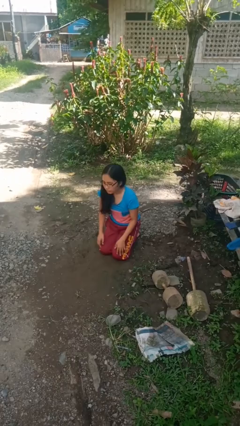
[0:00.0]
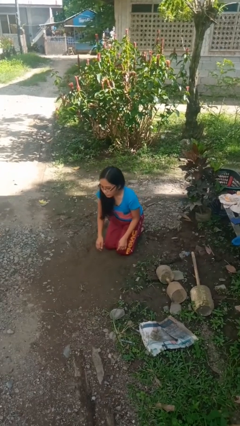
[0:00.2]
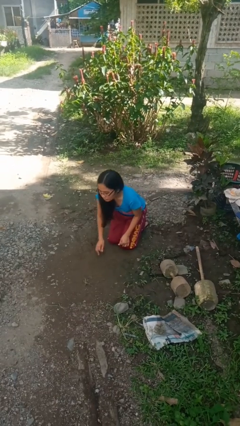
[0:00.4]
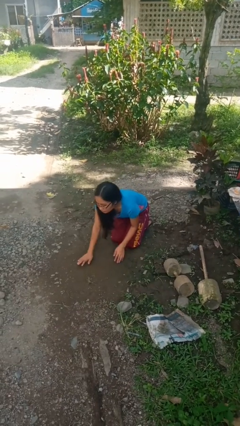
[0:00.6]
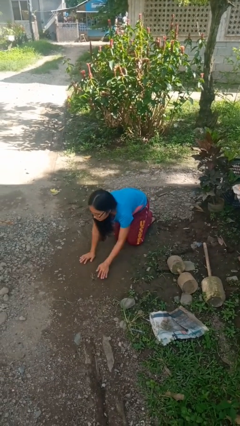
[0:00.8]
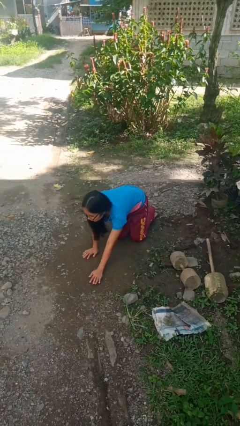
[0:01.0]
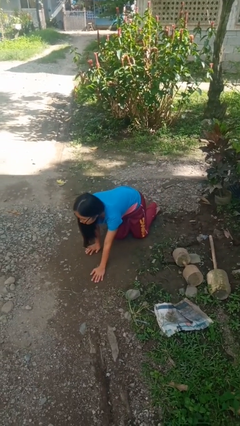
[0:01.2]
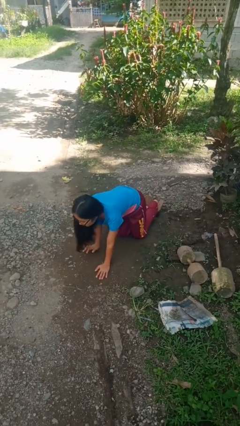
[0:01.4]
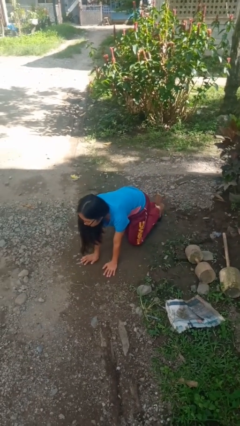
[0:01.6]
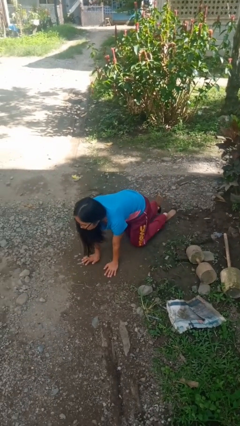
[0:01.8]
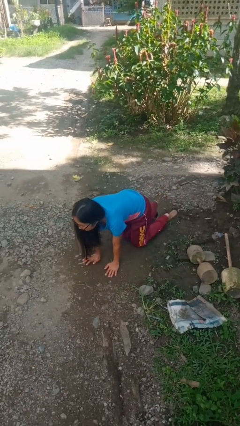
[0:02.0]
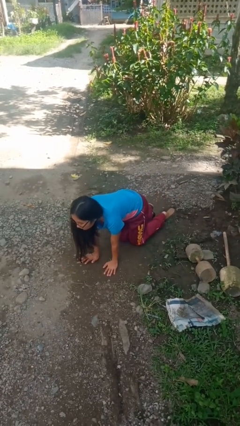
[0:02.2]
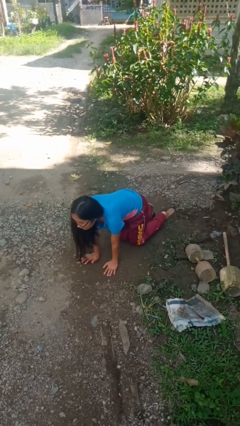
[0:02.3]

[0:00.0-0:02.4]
person crawls

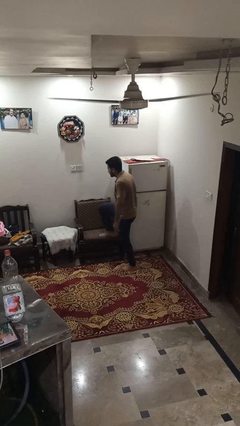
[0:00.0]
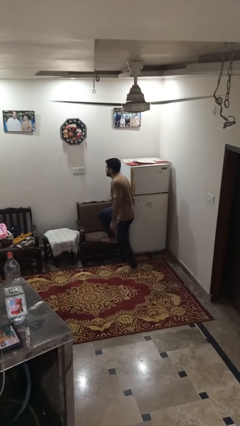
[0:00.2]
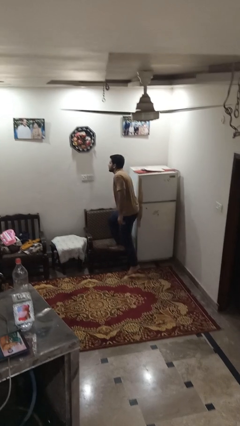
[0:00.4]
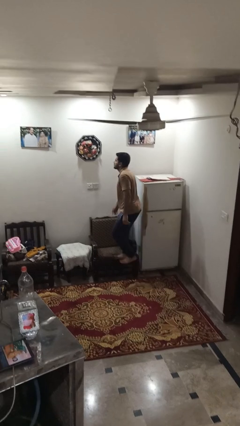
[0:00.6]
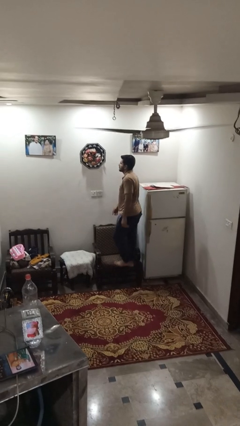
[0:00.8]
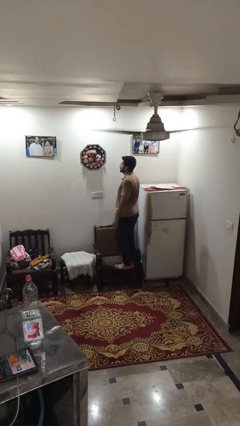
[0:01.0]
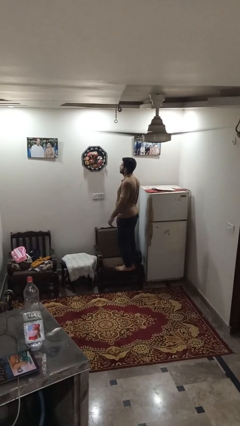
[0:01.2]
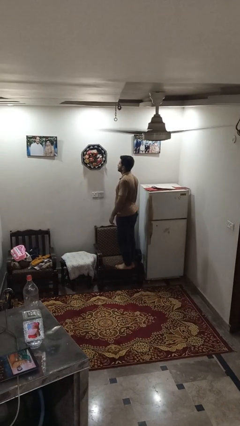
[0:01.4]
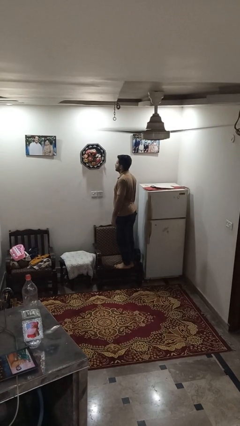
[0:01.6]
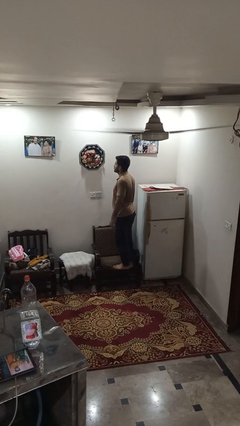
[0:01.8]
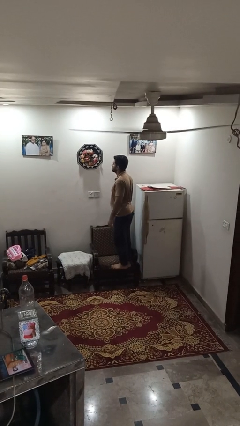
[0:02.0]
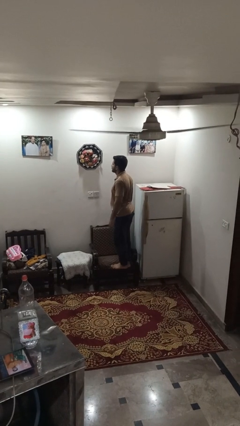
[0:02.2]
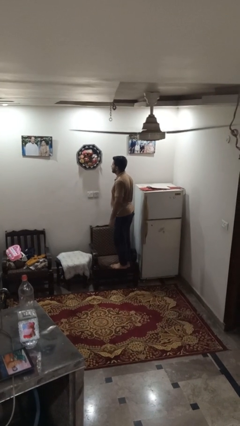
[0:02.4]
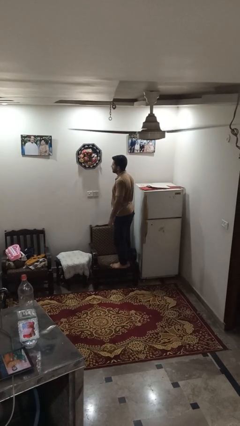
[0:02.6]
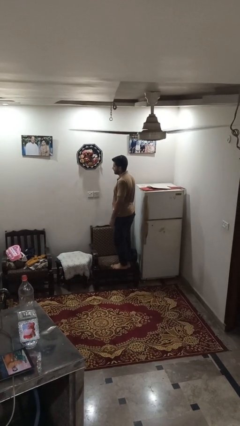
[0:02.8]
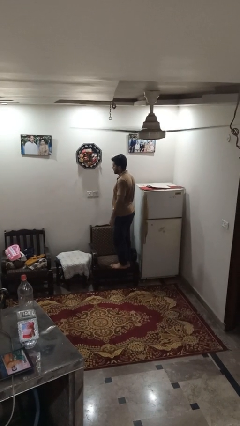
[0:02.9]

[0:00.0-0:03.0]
person climbs on couch

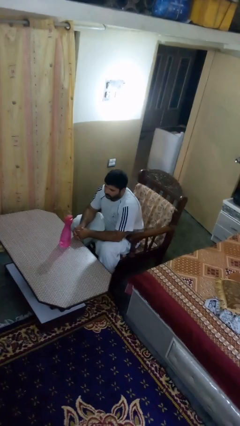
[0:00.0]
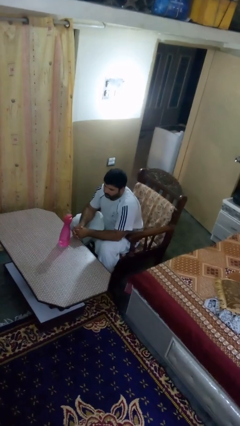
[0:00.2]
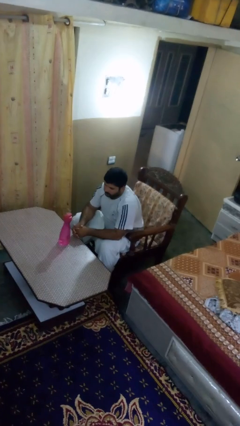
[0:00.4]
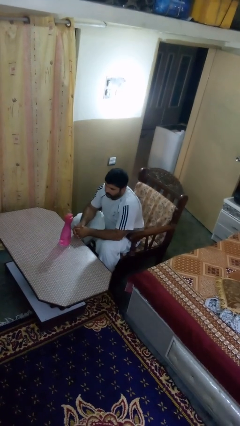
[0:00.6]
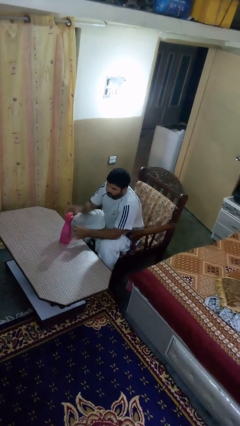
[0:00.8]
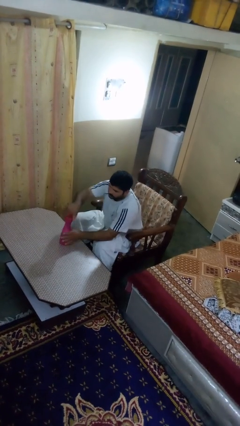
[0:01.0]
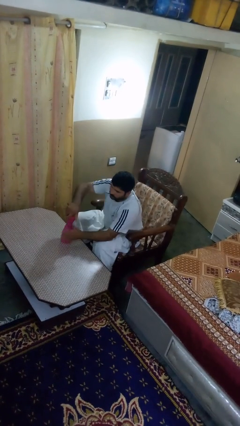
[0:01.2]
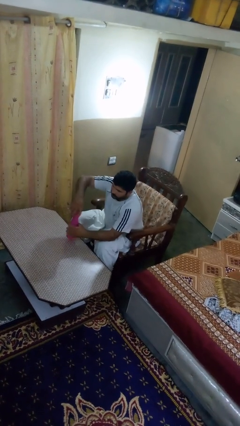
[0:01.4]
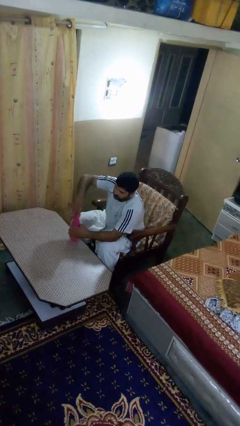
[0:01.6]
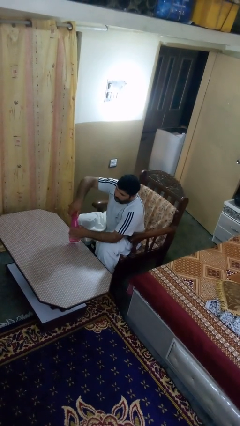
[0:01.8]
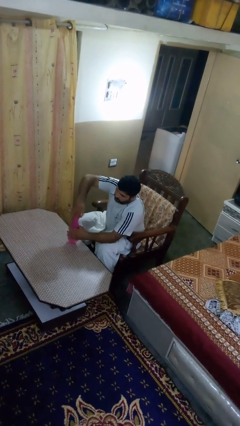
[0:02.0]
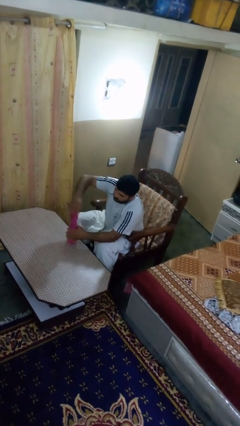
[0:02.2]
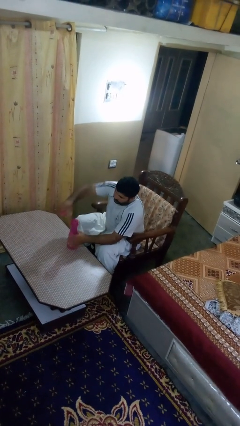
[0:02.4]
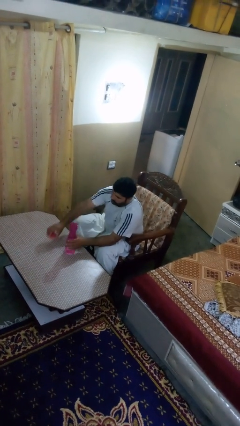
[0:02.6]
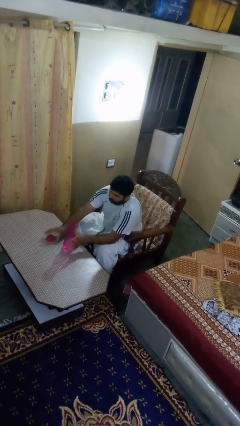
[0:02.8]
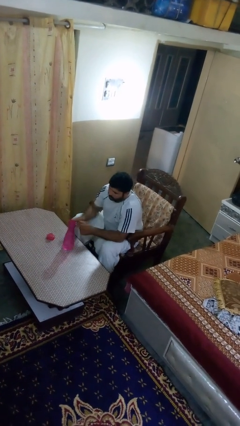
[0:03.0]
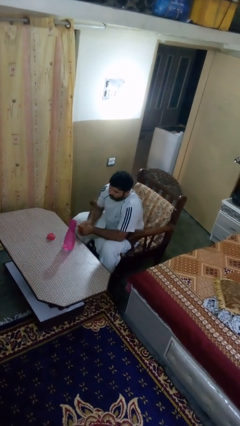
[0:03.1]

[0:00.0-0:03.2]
person unscrews lid from bottle

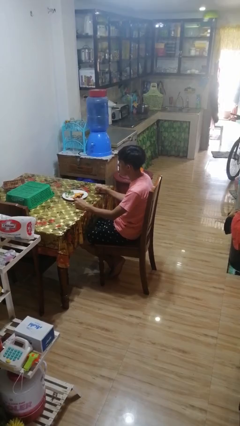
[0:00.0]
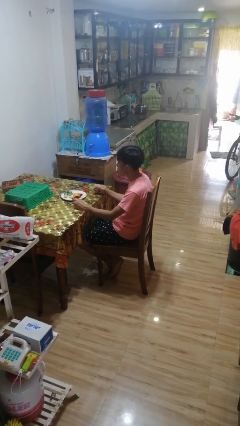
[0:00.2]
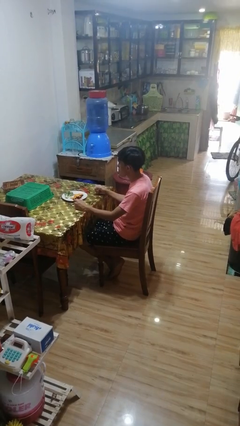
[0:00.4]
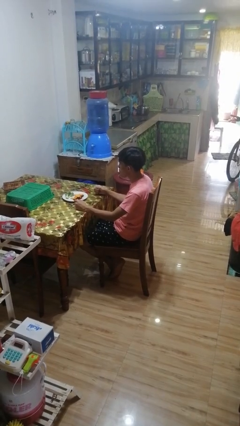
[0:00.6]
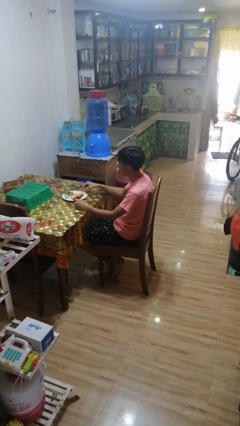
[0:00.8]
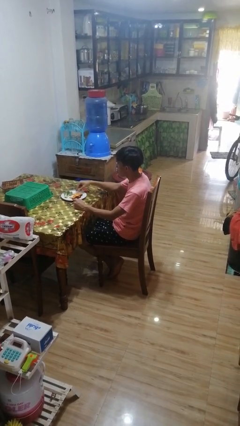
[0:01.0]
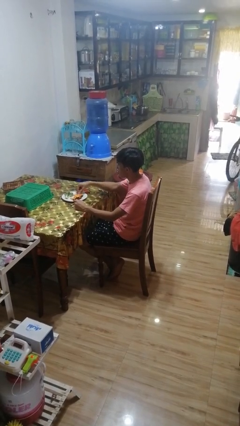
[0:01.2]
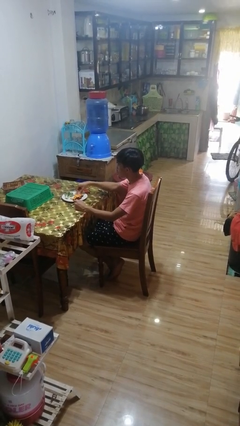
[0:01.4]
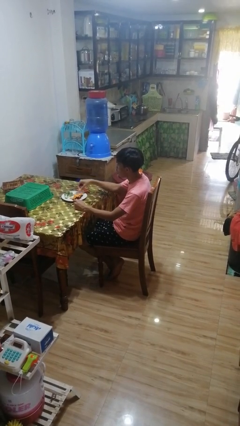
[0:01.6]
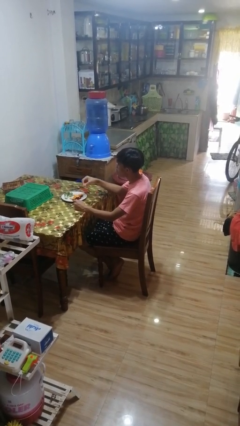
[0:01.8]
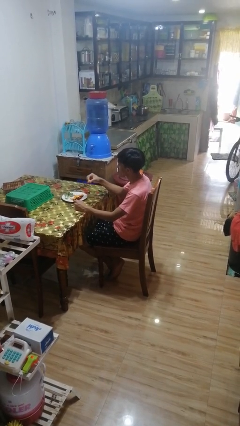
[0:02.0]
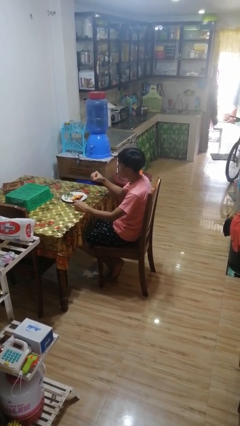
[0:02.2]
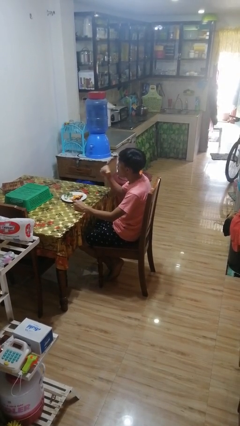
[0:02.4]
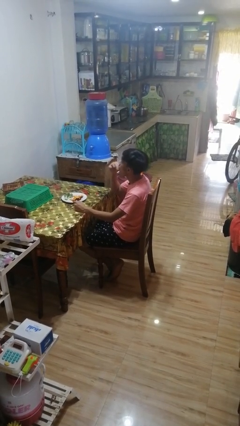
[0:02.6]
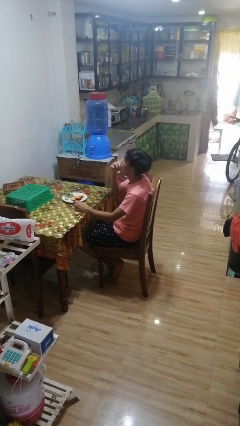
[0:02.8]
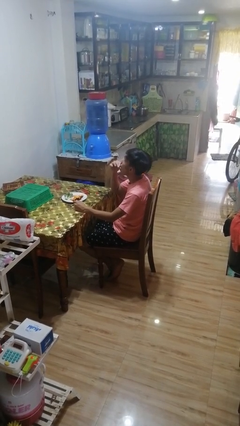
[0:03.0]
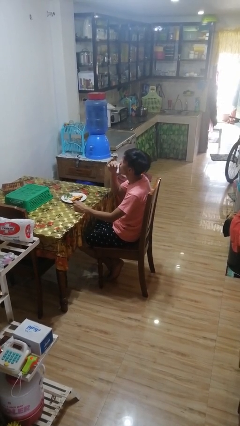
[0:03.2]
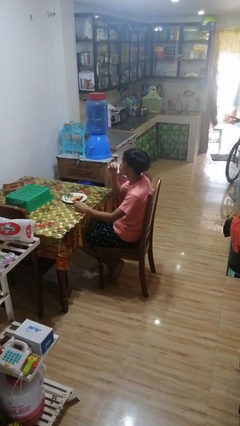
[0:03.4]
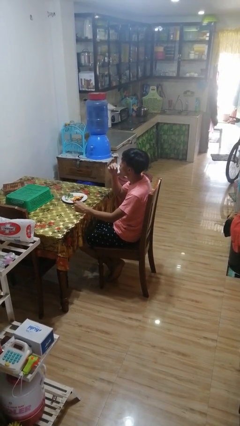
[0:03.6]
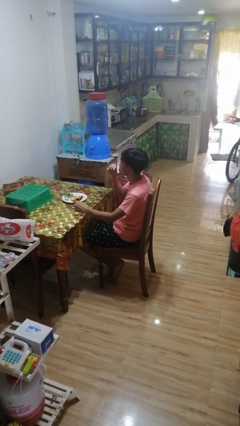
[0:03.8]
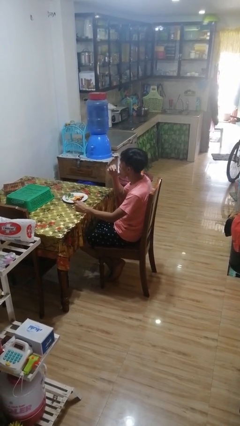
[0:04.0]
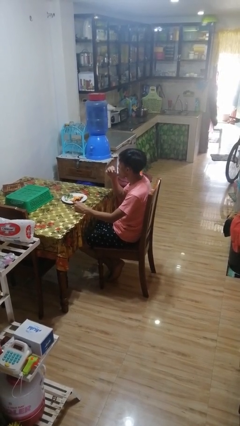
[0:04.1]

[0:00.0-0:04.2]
person eats with hands

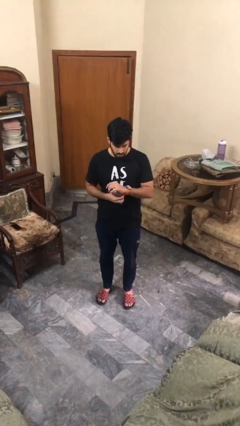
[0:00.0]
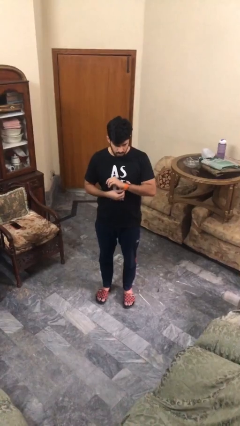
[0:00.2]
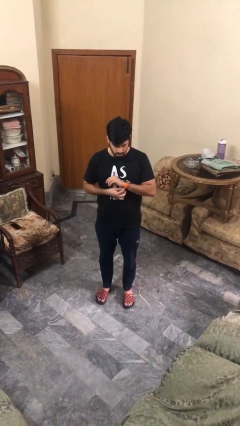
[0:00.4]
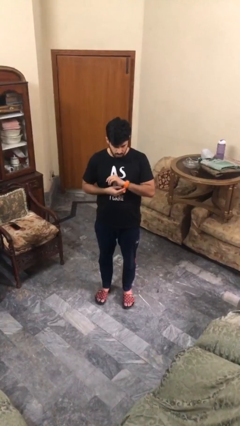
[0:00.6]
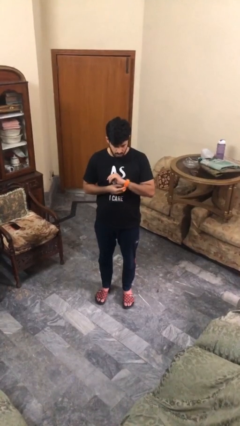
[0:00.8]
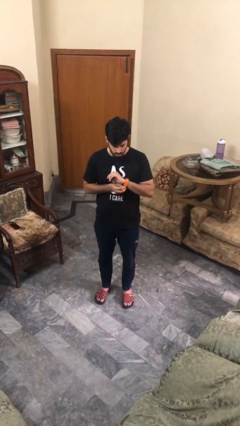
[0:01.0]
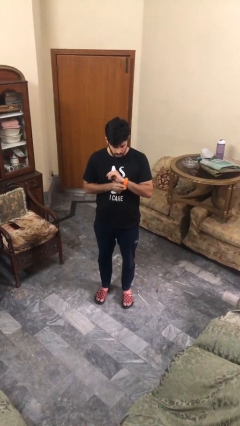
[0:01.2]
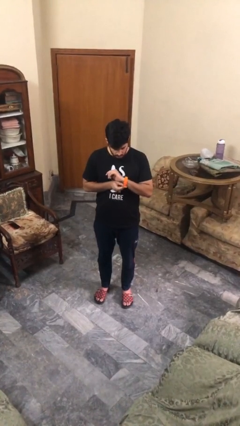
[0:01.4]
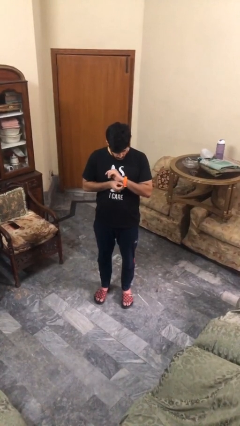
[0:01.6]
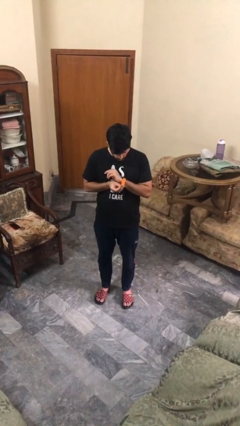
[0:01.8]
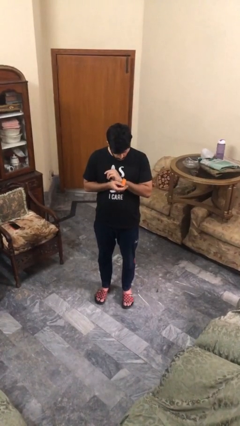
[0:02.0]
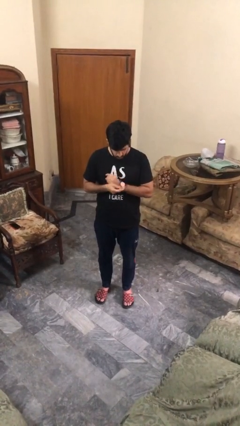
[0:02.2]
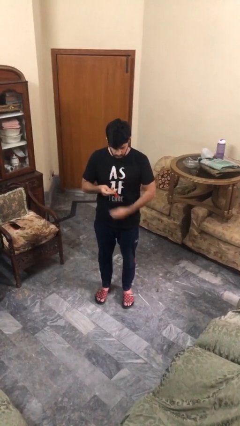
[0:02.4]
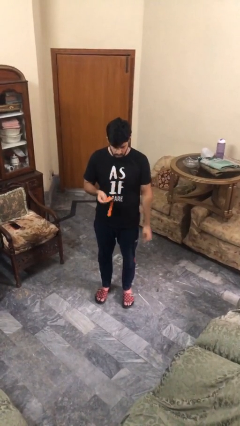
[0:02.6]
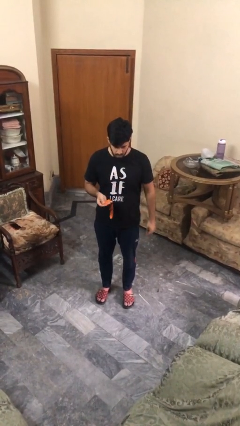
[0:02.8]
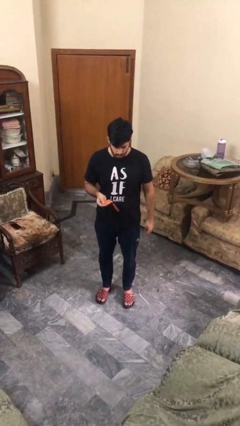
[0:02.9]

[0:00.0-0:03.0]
person takes off wristwatch

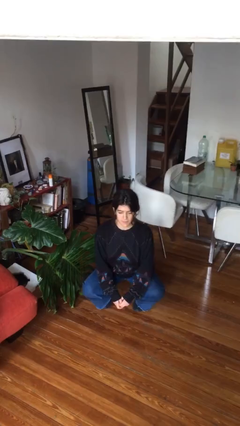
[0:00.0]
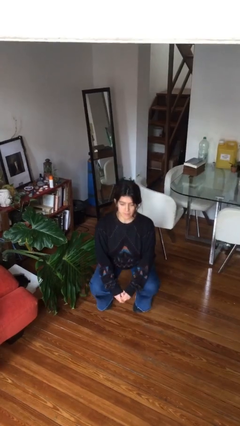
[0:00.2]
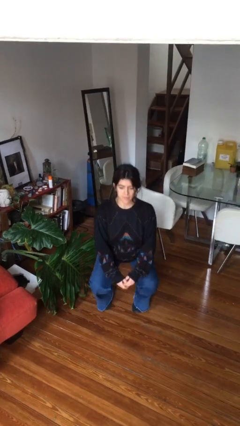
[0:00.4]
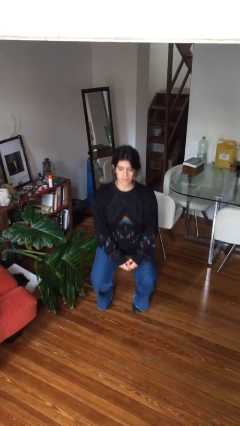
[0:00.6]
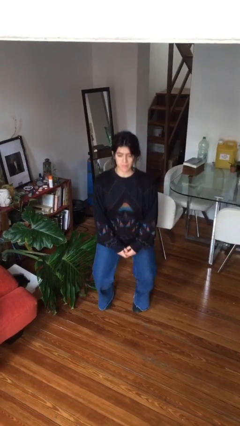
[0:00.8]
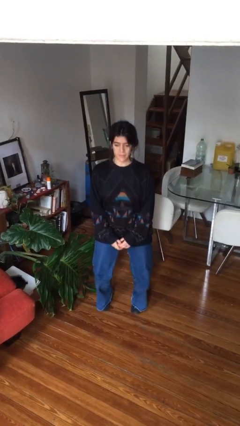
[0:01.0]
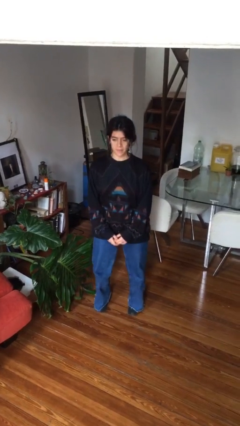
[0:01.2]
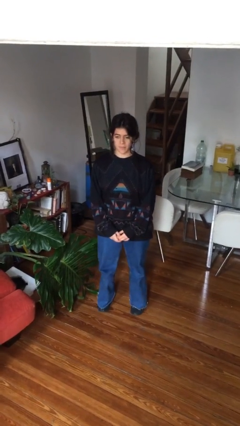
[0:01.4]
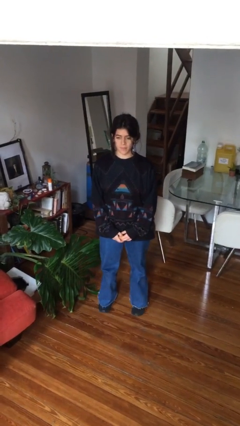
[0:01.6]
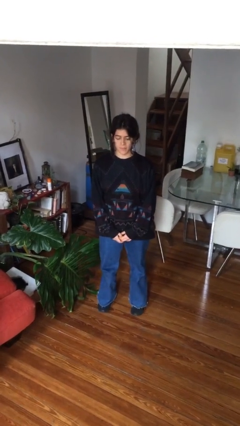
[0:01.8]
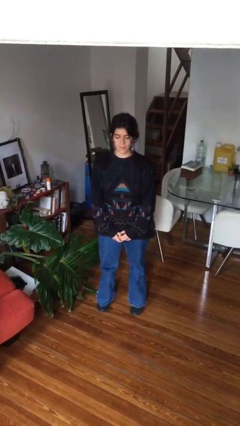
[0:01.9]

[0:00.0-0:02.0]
person stands up
